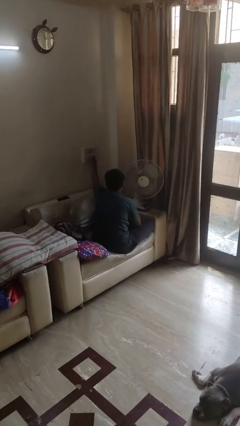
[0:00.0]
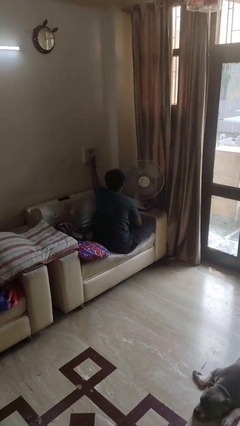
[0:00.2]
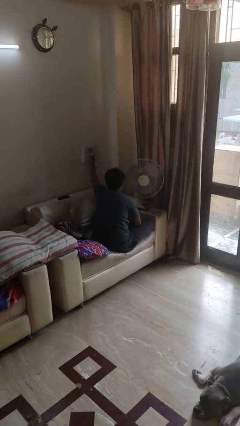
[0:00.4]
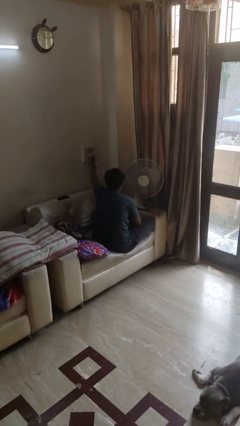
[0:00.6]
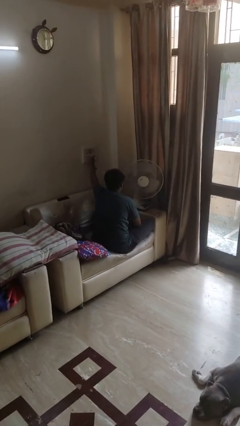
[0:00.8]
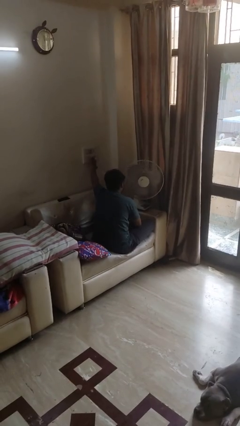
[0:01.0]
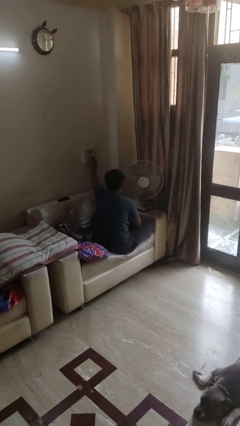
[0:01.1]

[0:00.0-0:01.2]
person turns on fan

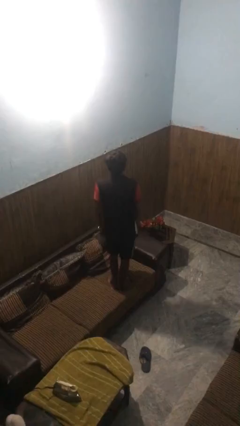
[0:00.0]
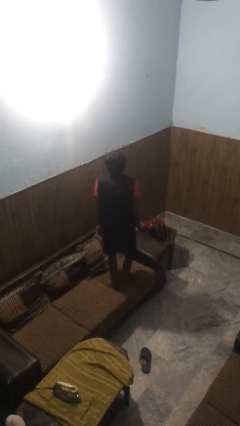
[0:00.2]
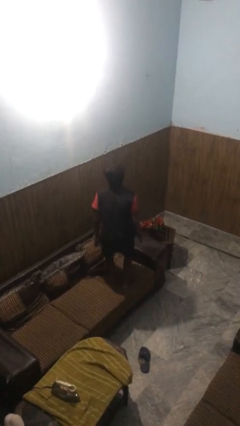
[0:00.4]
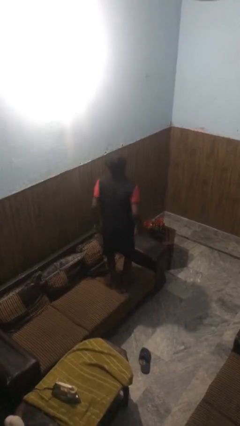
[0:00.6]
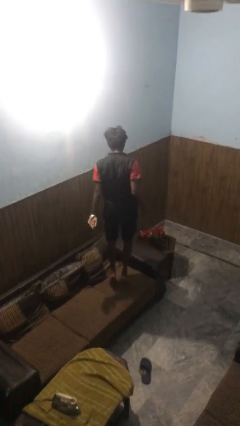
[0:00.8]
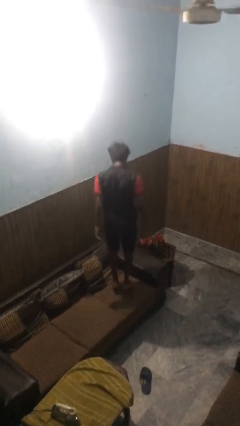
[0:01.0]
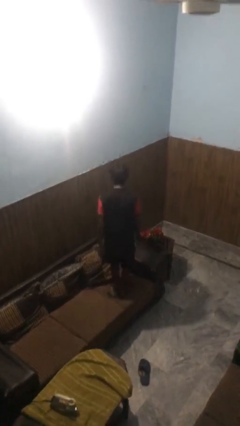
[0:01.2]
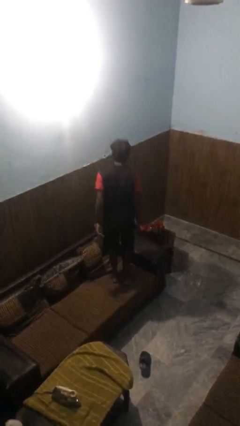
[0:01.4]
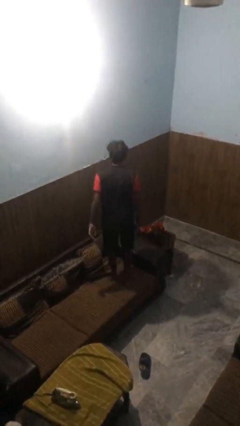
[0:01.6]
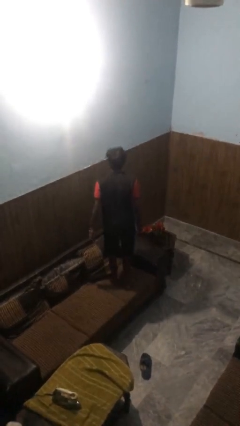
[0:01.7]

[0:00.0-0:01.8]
person jumps on couch

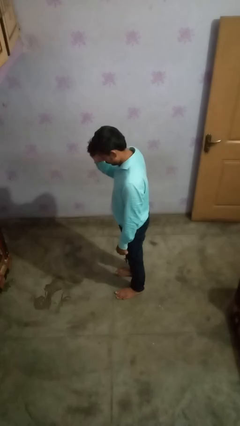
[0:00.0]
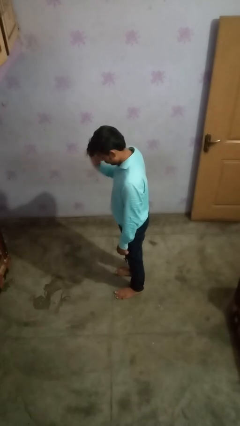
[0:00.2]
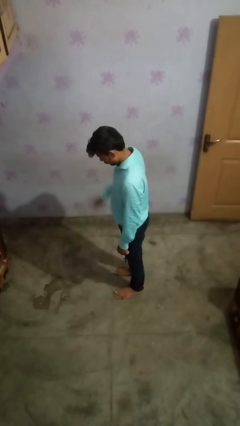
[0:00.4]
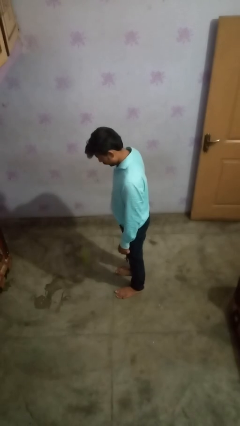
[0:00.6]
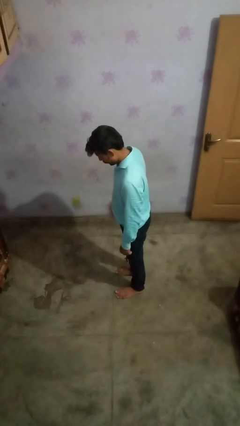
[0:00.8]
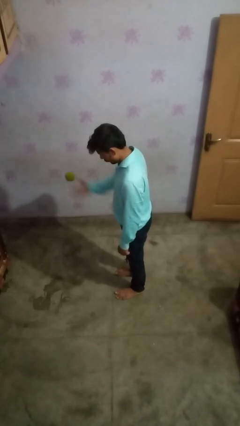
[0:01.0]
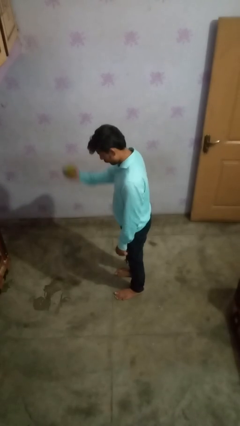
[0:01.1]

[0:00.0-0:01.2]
person bounces ball on floor

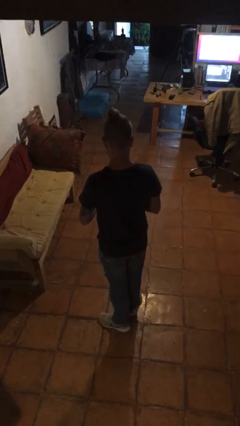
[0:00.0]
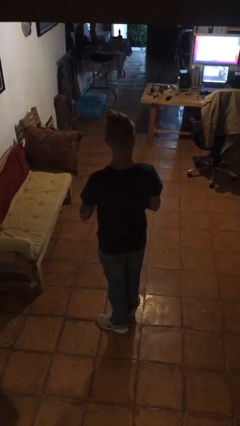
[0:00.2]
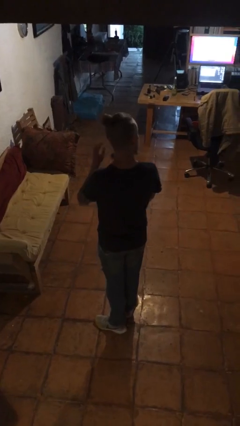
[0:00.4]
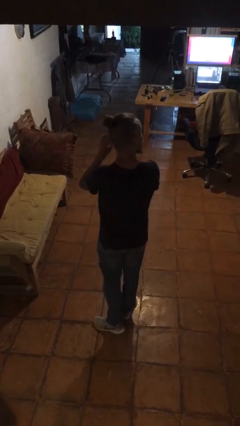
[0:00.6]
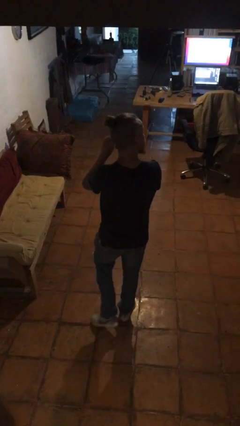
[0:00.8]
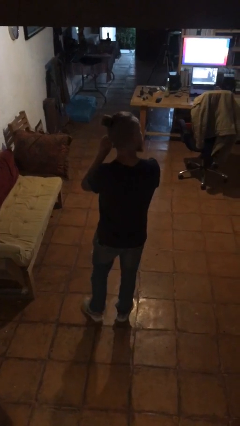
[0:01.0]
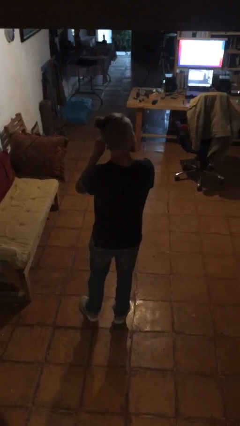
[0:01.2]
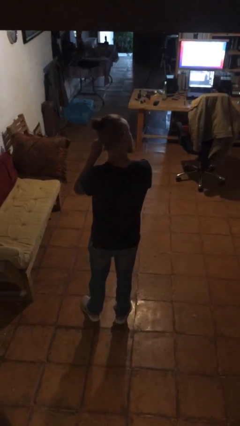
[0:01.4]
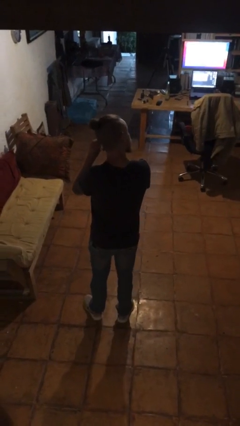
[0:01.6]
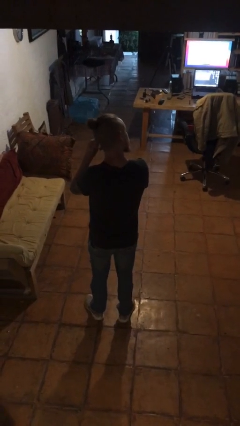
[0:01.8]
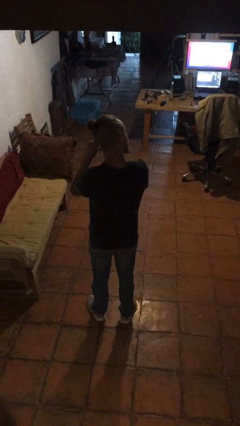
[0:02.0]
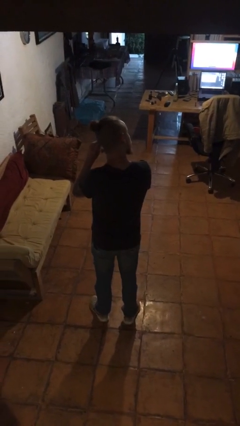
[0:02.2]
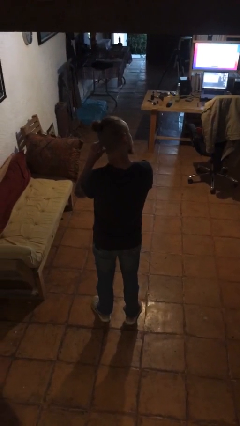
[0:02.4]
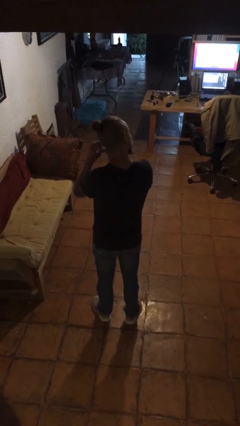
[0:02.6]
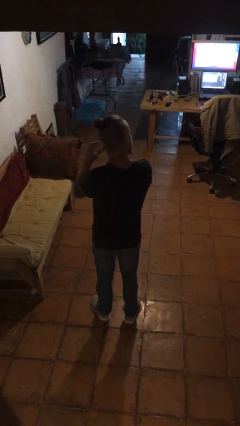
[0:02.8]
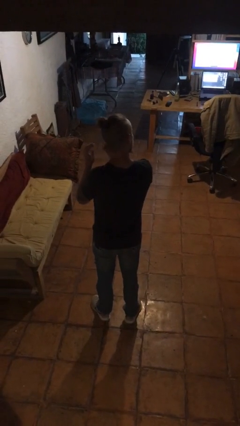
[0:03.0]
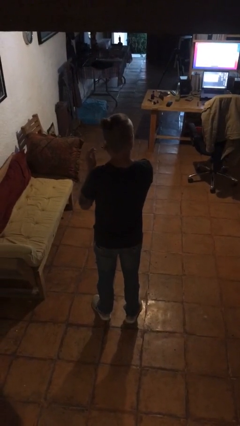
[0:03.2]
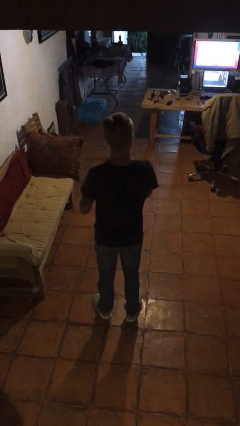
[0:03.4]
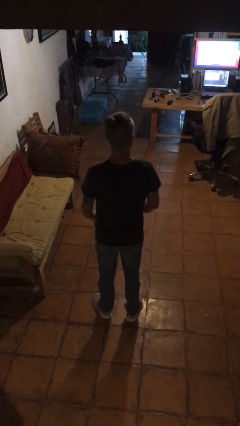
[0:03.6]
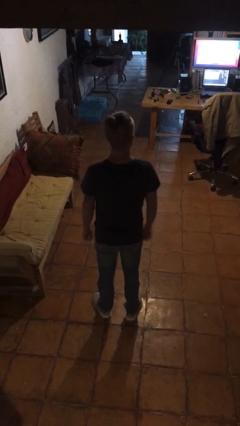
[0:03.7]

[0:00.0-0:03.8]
person puts on earrings

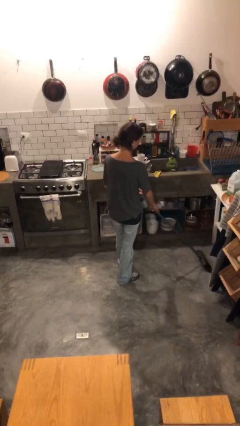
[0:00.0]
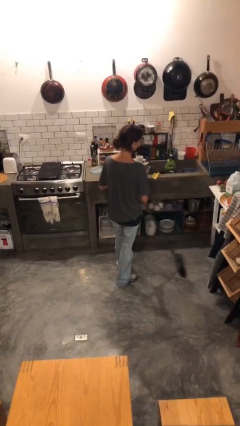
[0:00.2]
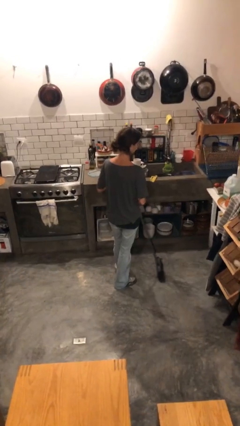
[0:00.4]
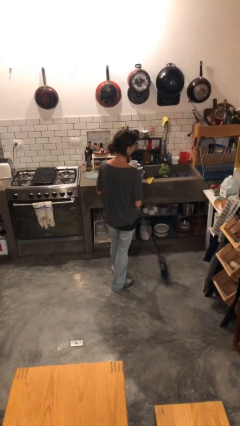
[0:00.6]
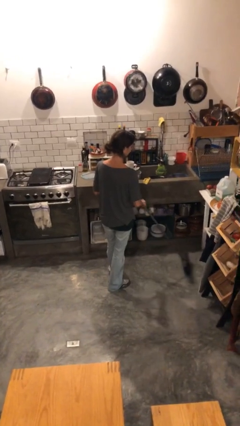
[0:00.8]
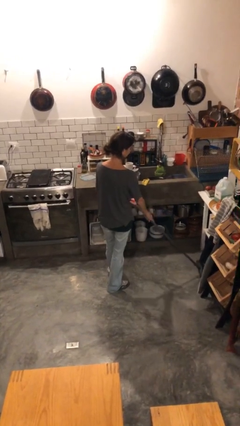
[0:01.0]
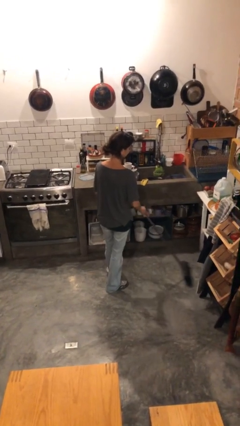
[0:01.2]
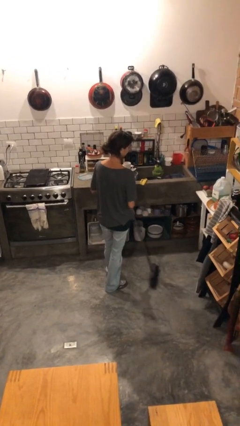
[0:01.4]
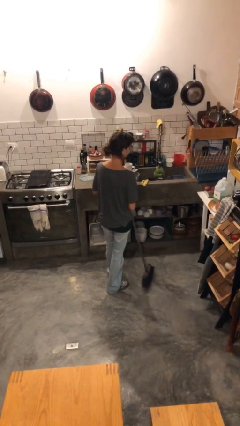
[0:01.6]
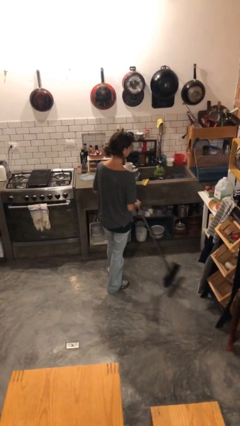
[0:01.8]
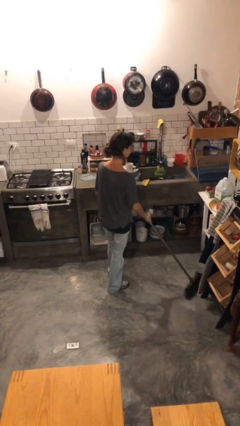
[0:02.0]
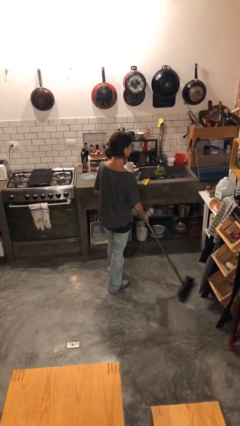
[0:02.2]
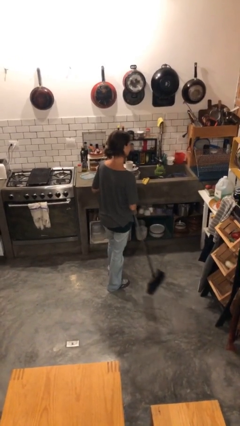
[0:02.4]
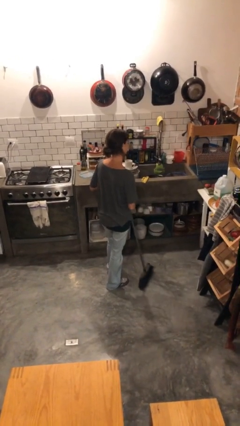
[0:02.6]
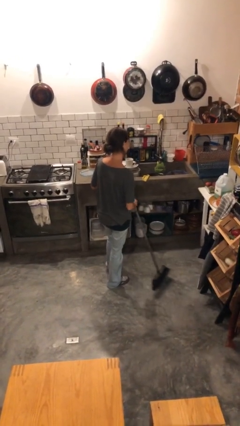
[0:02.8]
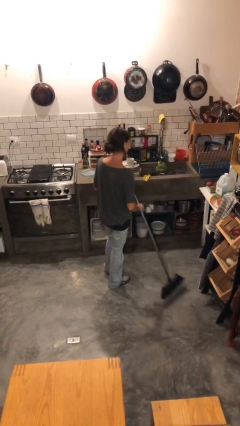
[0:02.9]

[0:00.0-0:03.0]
person sweeps floor

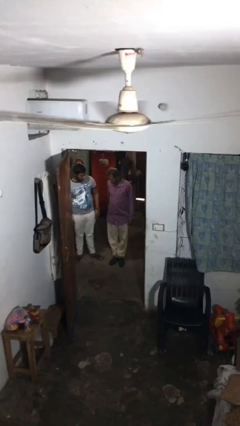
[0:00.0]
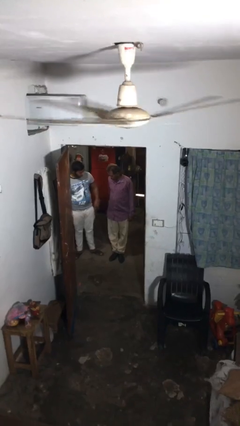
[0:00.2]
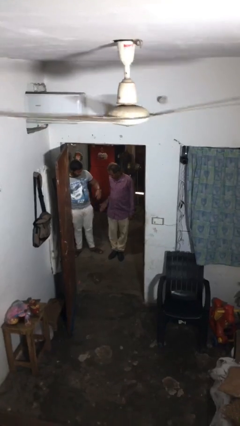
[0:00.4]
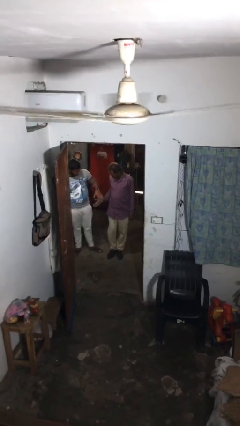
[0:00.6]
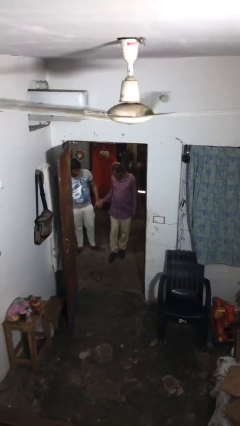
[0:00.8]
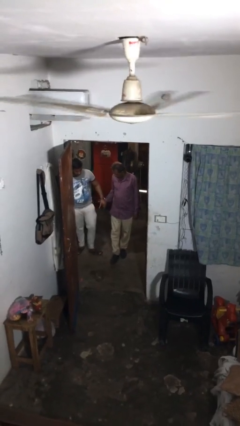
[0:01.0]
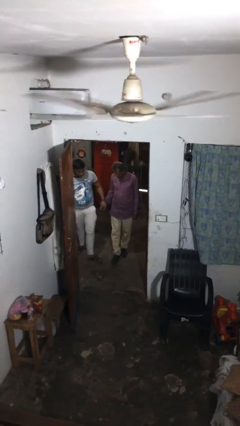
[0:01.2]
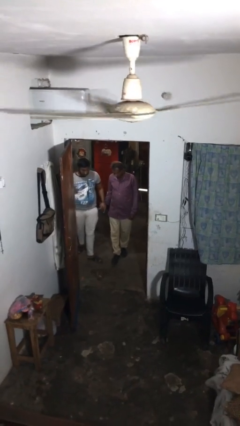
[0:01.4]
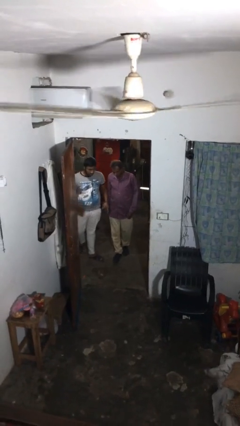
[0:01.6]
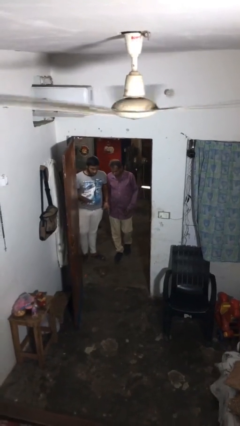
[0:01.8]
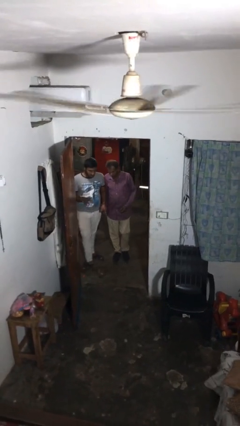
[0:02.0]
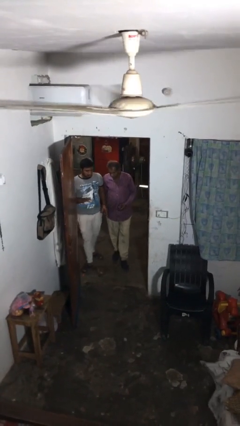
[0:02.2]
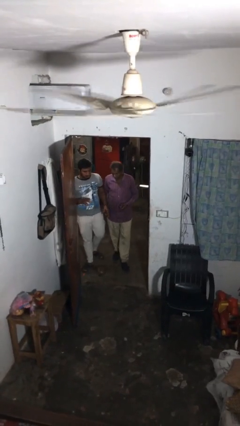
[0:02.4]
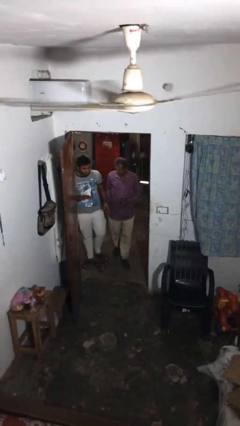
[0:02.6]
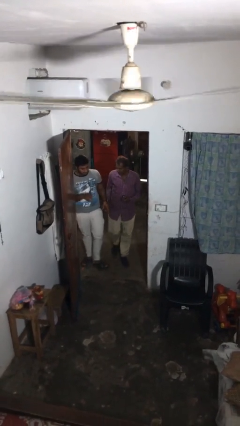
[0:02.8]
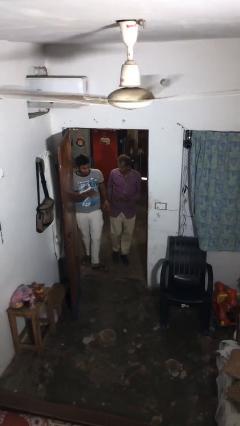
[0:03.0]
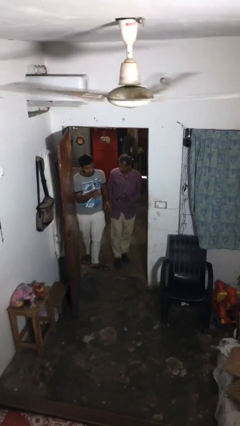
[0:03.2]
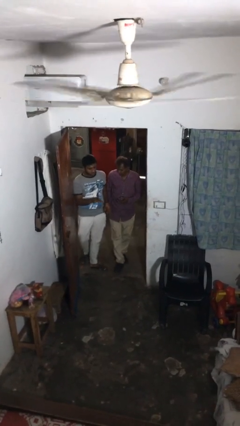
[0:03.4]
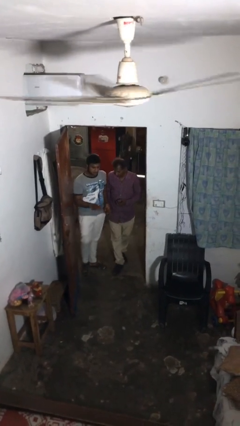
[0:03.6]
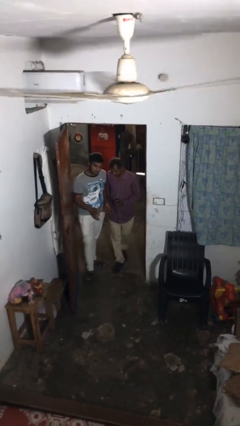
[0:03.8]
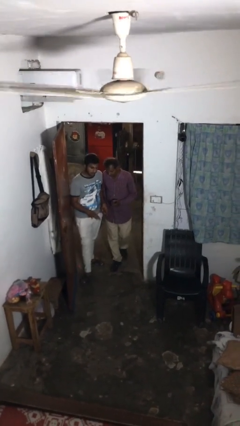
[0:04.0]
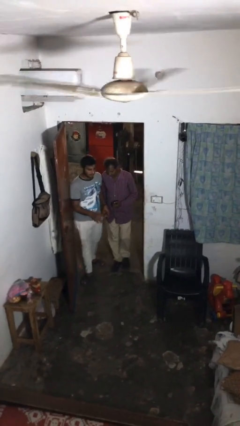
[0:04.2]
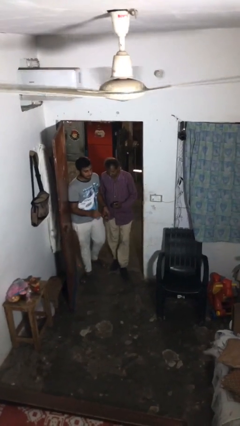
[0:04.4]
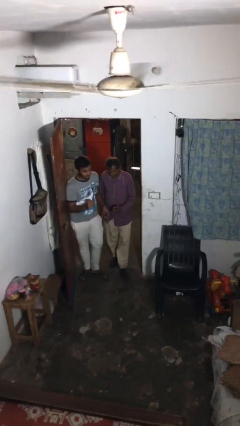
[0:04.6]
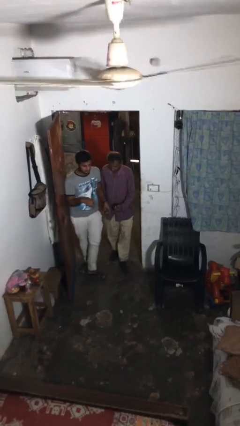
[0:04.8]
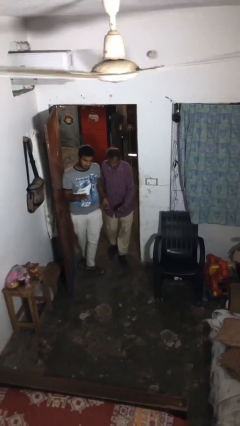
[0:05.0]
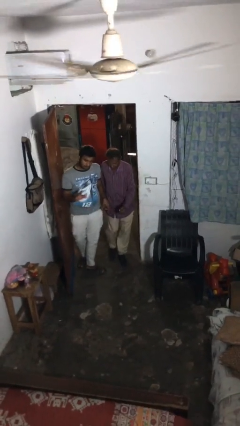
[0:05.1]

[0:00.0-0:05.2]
person holds hand

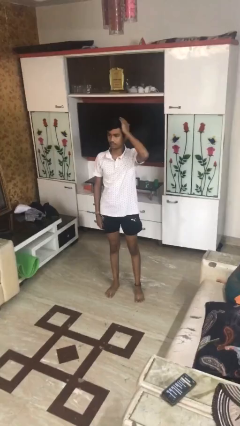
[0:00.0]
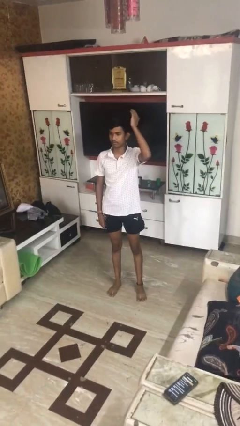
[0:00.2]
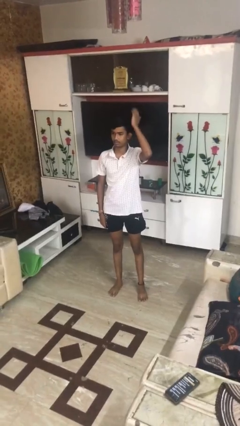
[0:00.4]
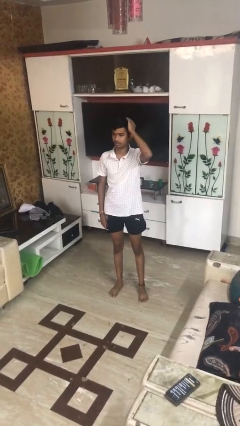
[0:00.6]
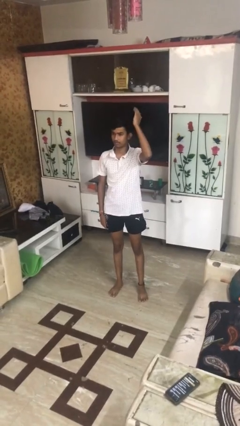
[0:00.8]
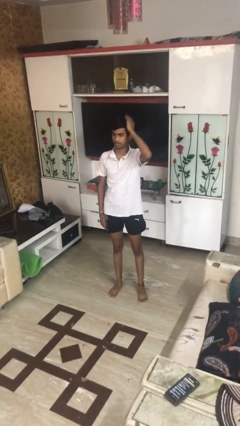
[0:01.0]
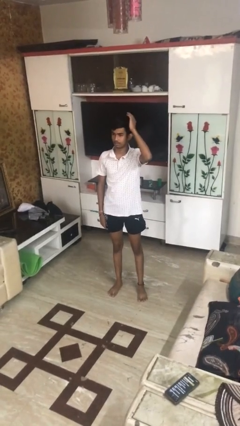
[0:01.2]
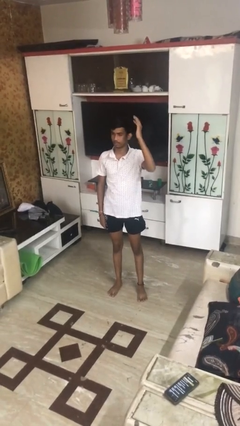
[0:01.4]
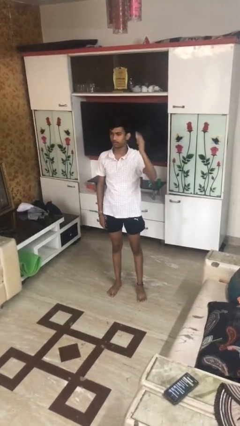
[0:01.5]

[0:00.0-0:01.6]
person pats head
